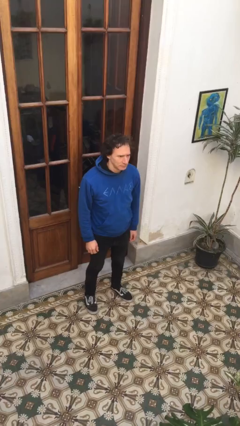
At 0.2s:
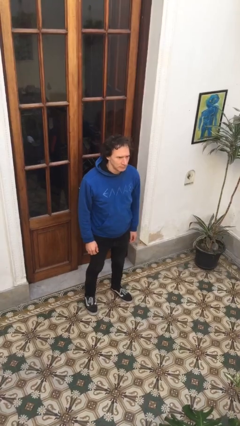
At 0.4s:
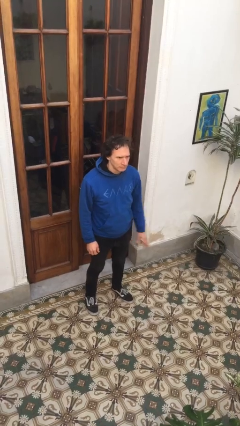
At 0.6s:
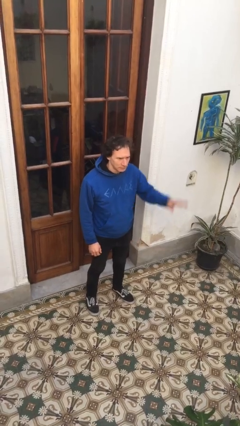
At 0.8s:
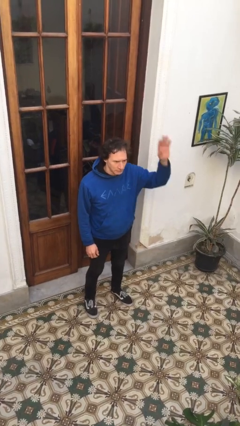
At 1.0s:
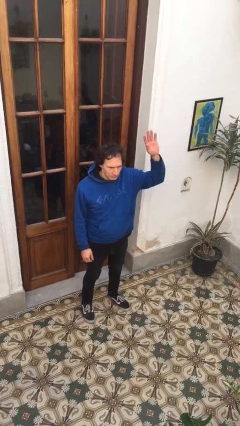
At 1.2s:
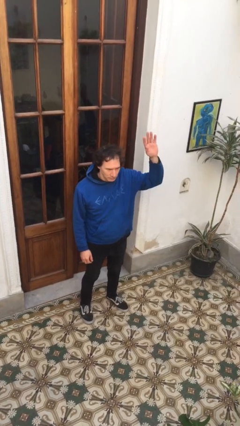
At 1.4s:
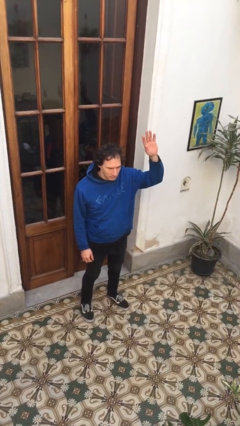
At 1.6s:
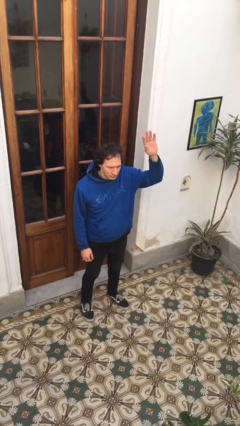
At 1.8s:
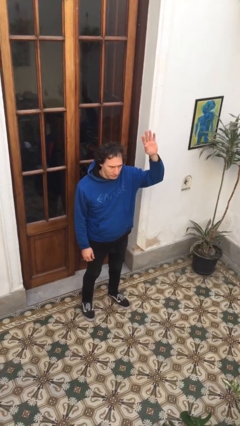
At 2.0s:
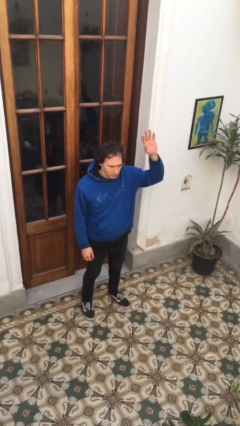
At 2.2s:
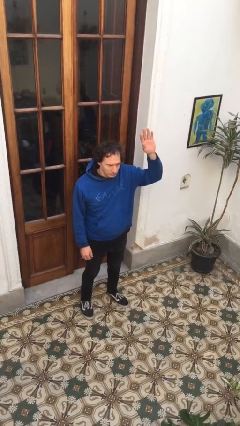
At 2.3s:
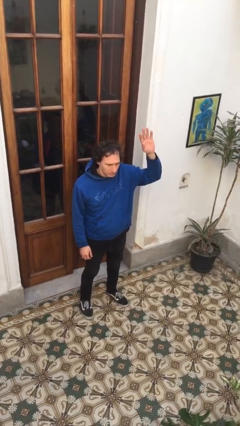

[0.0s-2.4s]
person gestures raise hand

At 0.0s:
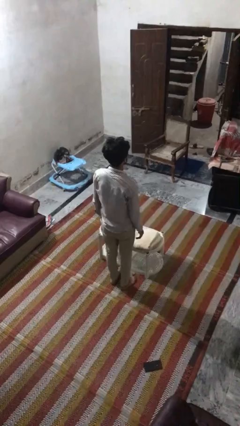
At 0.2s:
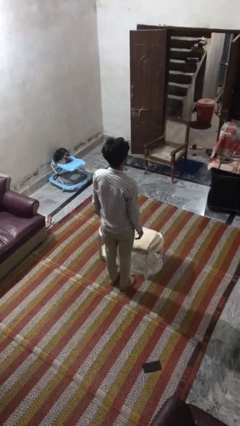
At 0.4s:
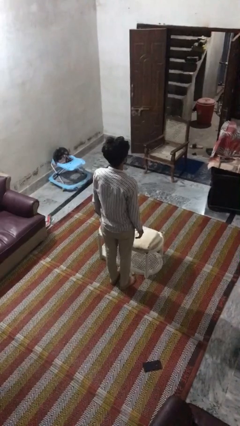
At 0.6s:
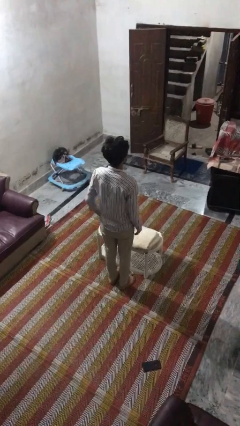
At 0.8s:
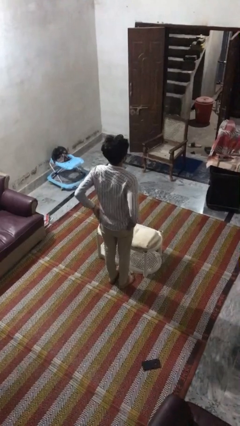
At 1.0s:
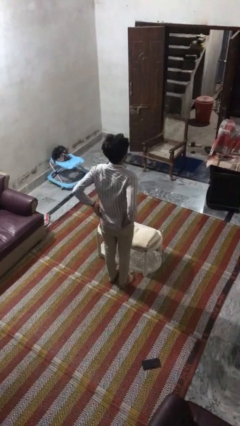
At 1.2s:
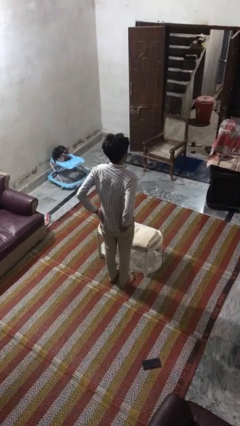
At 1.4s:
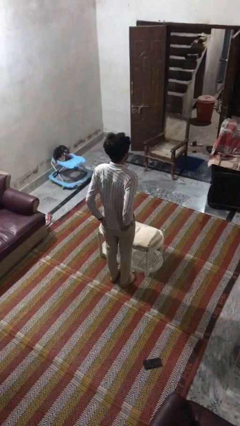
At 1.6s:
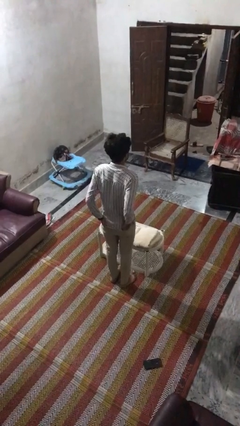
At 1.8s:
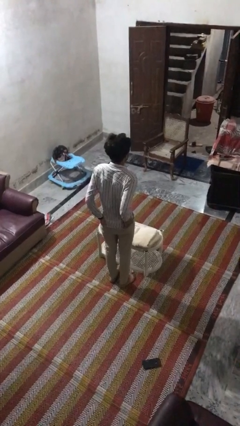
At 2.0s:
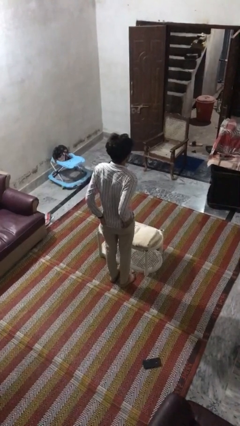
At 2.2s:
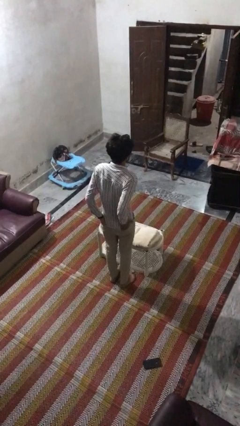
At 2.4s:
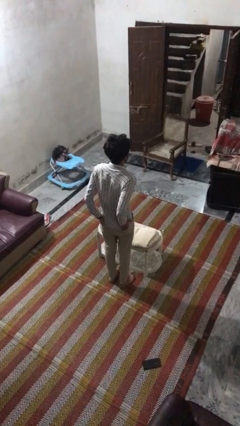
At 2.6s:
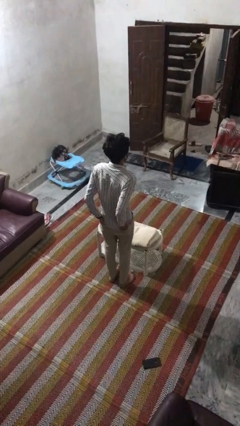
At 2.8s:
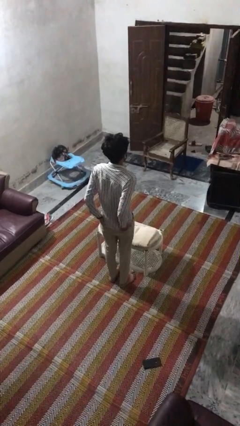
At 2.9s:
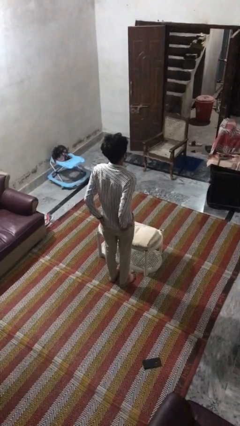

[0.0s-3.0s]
person puts hands in back pockets

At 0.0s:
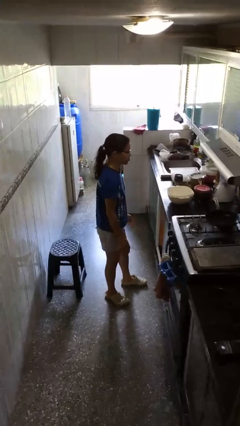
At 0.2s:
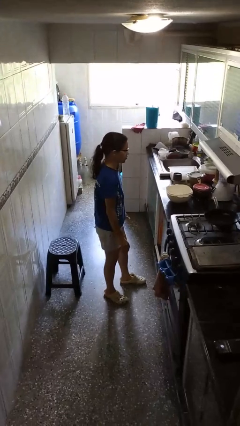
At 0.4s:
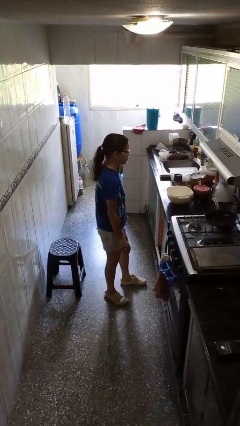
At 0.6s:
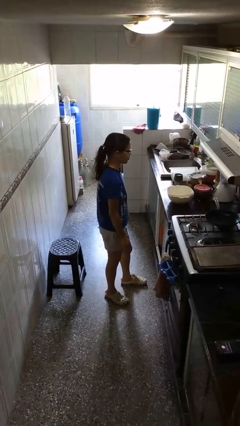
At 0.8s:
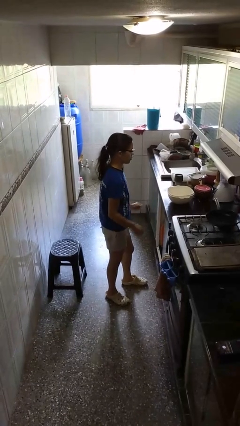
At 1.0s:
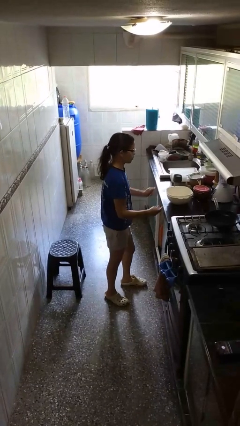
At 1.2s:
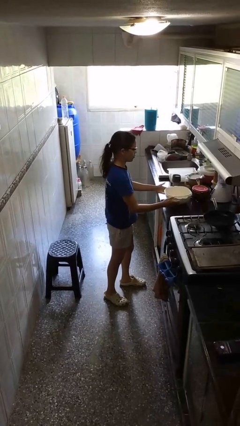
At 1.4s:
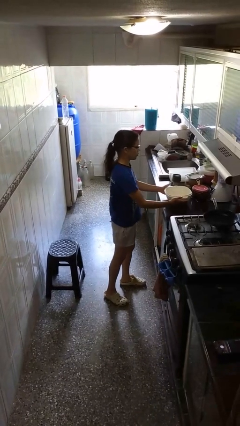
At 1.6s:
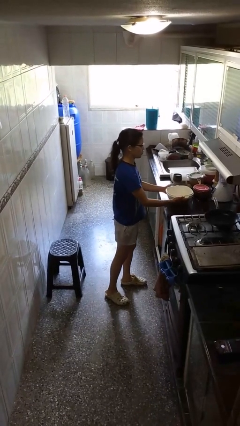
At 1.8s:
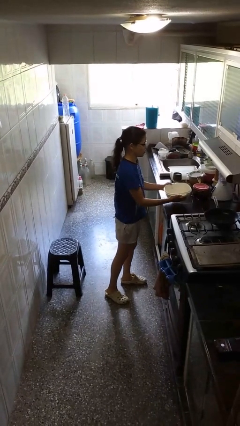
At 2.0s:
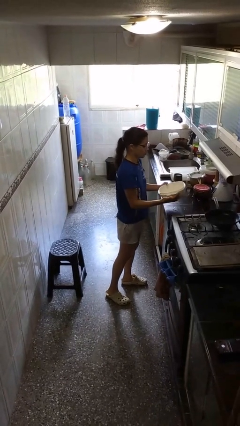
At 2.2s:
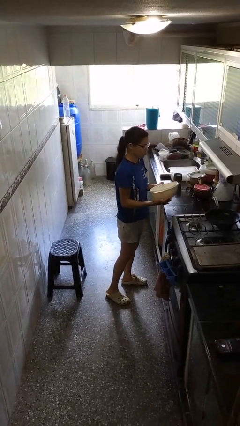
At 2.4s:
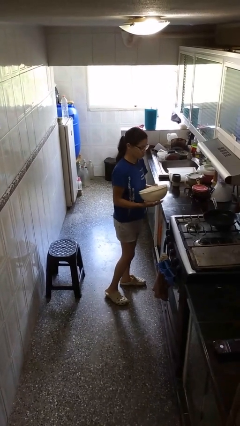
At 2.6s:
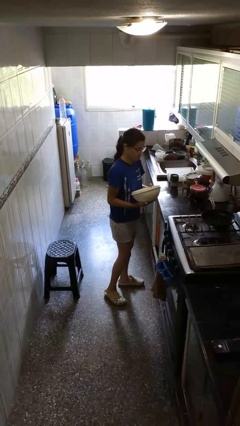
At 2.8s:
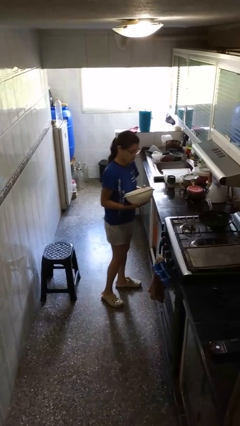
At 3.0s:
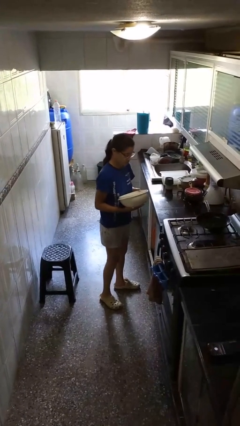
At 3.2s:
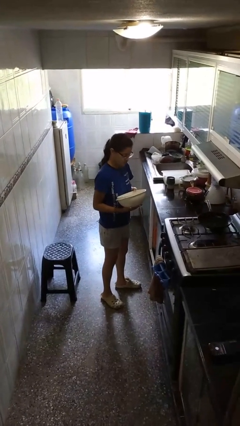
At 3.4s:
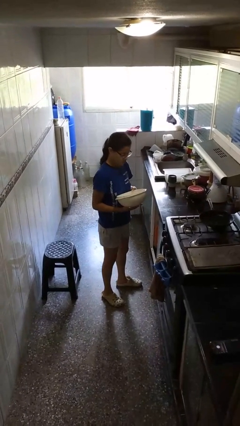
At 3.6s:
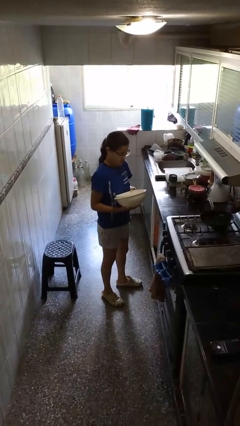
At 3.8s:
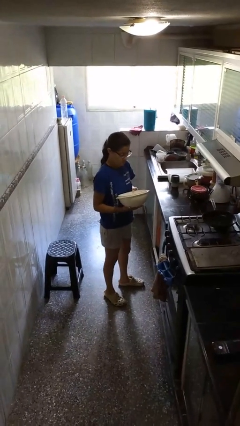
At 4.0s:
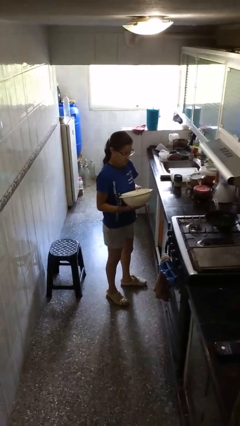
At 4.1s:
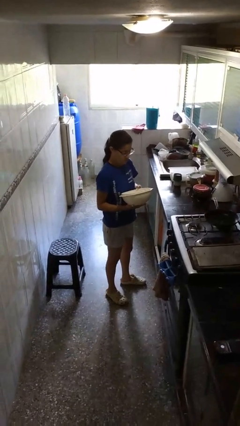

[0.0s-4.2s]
person picks up object from countertop

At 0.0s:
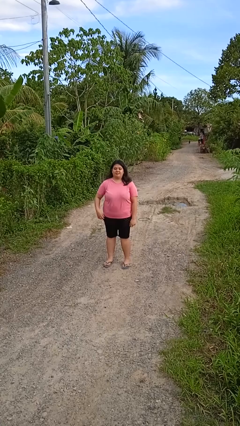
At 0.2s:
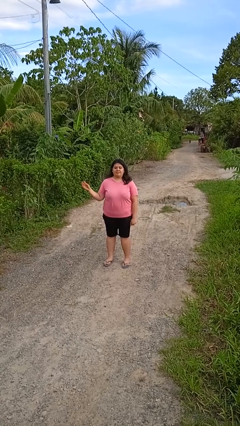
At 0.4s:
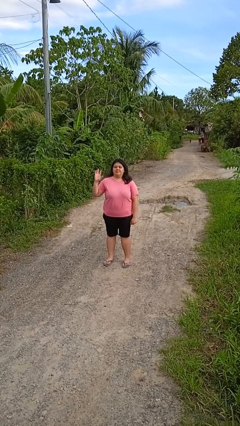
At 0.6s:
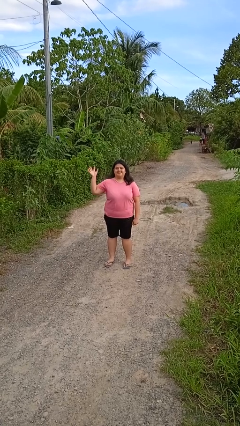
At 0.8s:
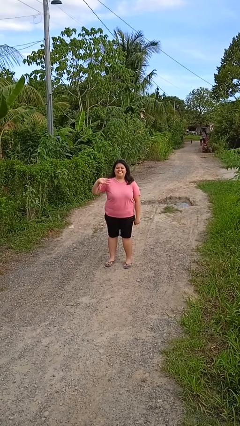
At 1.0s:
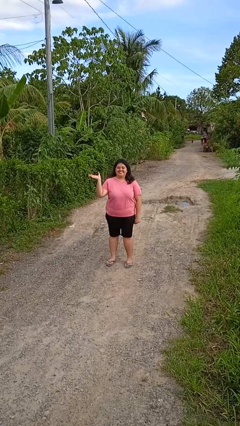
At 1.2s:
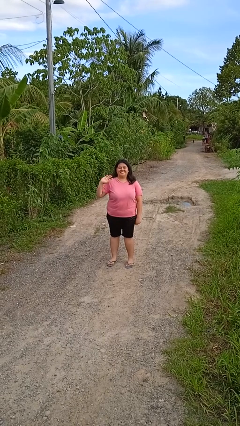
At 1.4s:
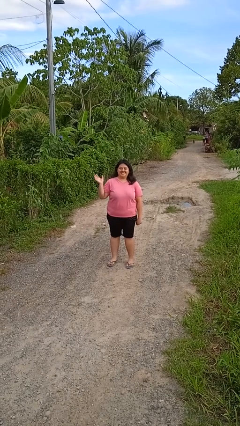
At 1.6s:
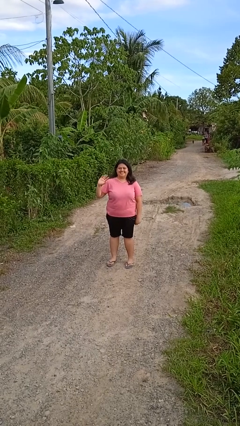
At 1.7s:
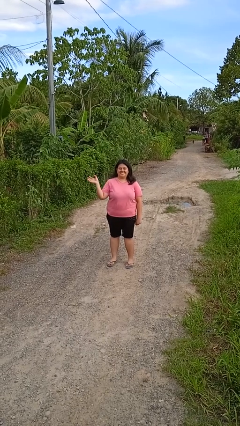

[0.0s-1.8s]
person waves at person

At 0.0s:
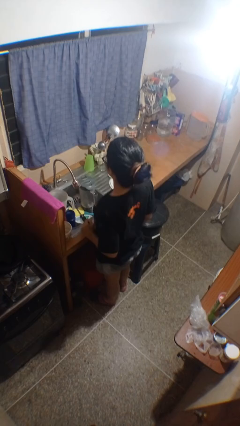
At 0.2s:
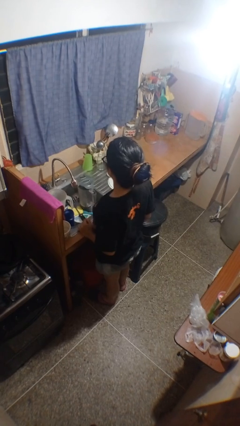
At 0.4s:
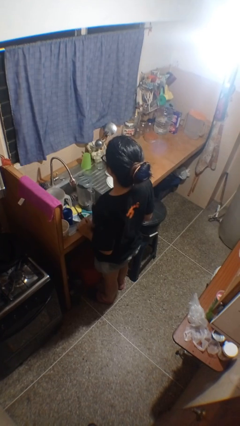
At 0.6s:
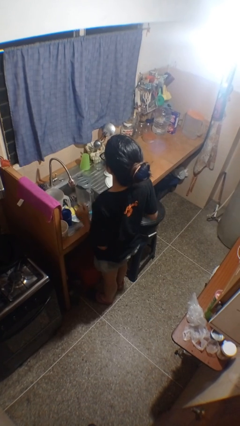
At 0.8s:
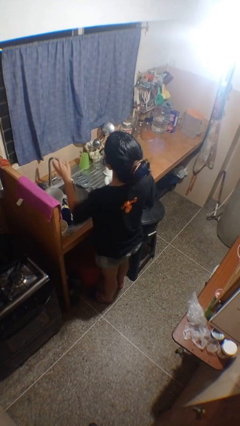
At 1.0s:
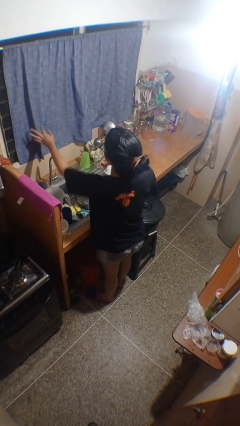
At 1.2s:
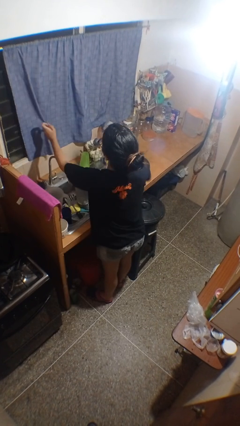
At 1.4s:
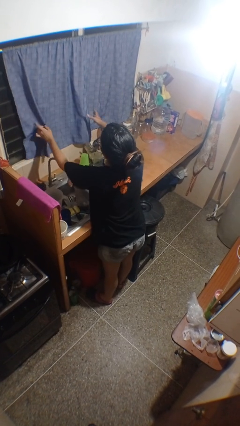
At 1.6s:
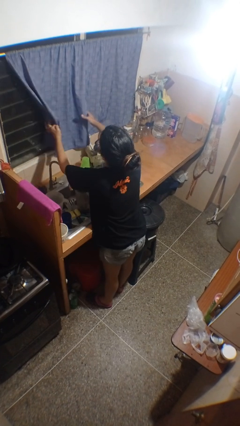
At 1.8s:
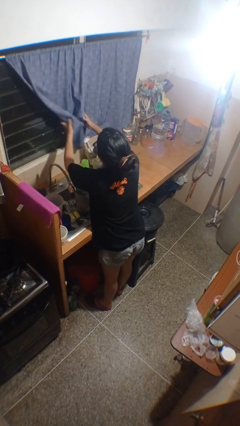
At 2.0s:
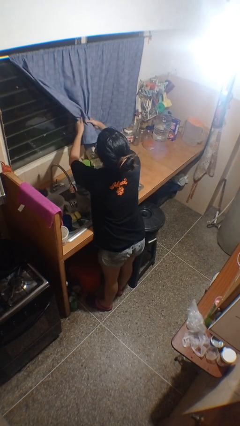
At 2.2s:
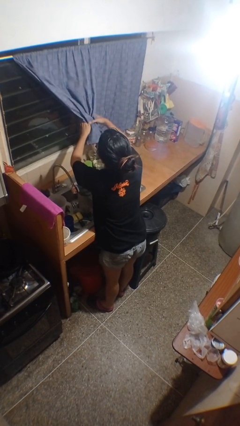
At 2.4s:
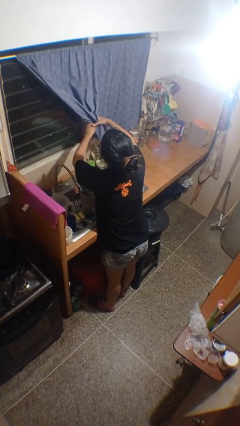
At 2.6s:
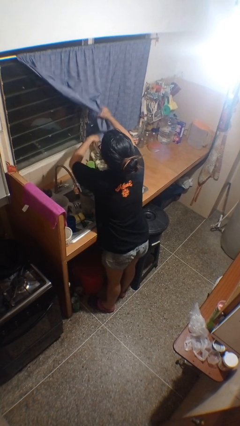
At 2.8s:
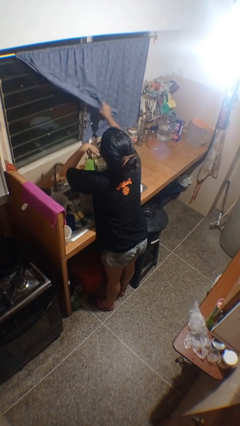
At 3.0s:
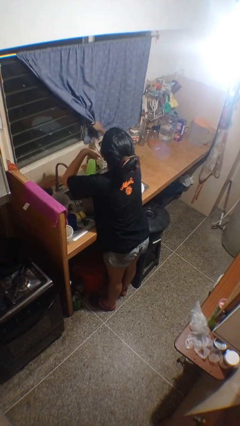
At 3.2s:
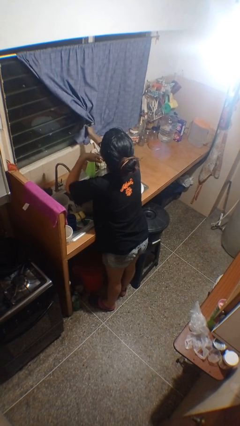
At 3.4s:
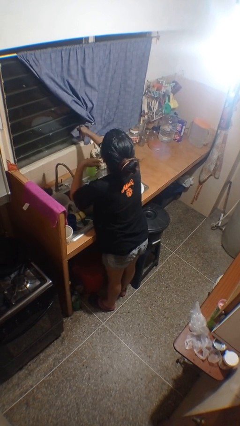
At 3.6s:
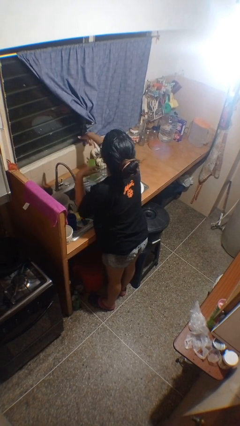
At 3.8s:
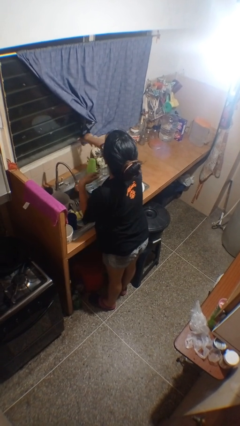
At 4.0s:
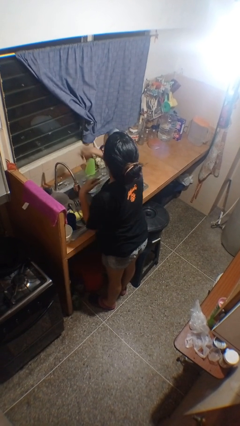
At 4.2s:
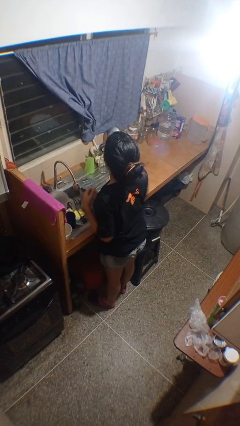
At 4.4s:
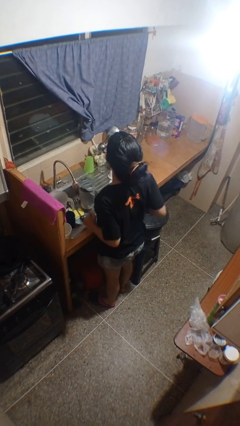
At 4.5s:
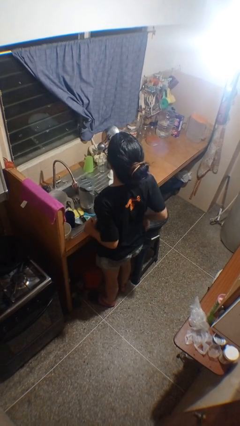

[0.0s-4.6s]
person opens curtains

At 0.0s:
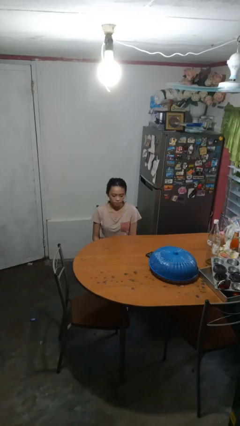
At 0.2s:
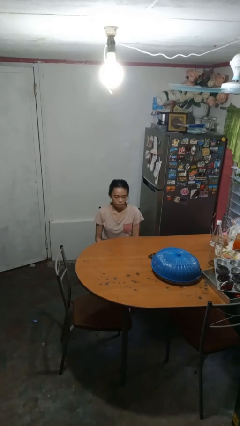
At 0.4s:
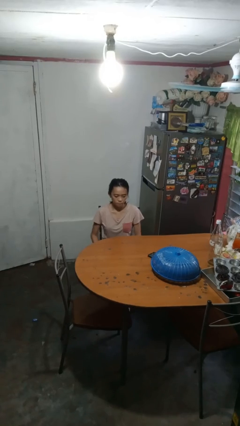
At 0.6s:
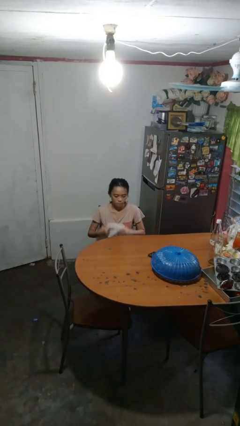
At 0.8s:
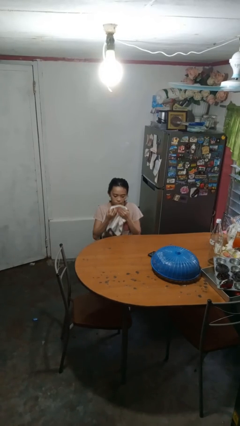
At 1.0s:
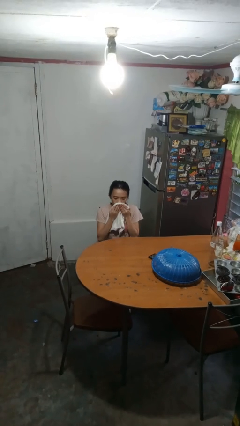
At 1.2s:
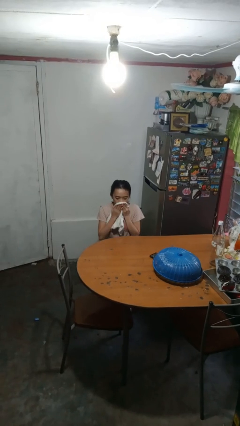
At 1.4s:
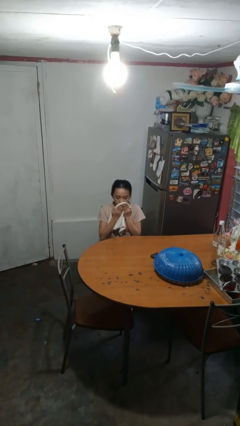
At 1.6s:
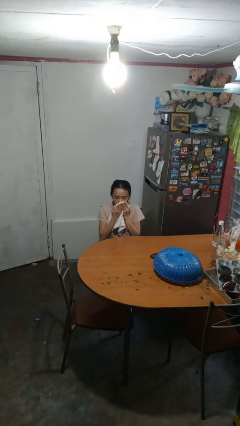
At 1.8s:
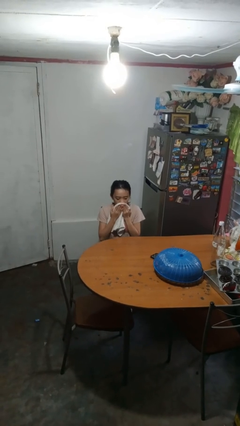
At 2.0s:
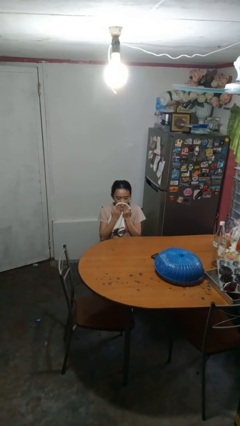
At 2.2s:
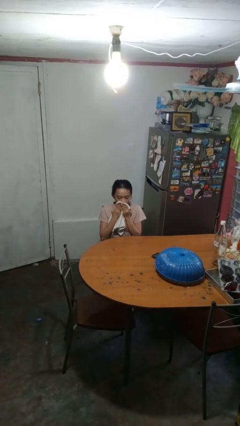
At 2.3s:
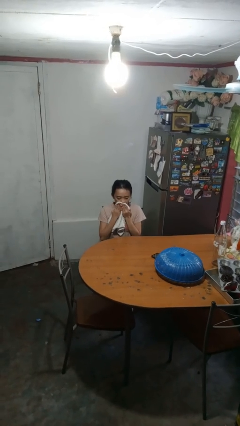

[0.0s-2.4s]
person wipes mouth with napkin
